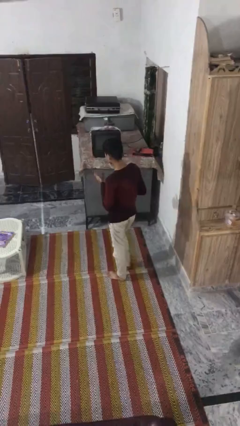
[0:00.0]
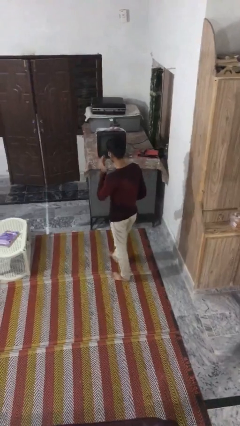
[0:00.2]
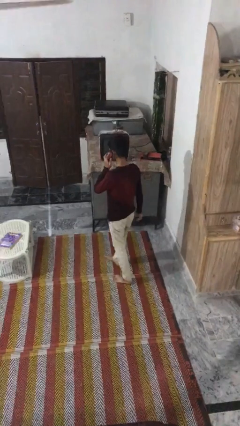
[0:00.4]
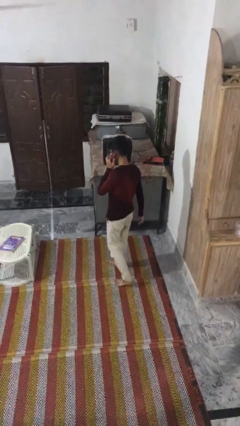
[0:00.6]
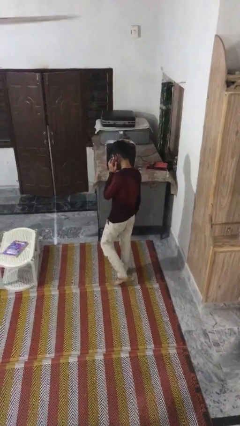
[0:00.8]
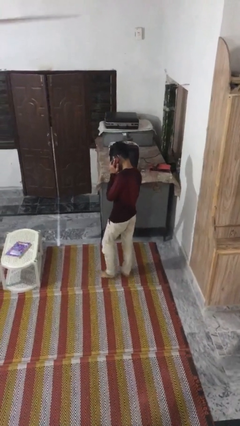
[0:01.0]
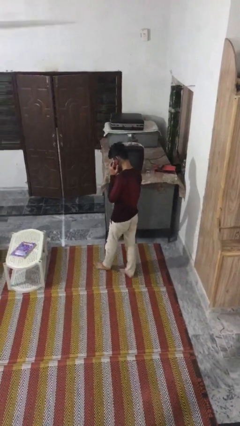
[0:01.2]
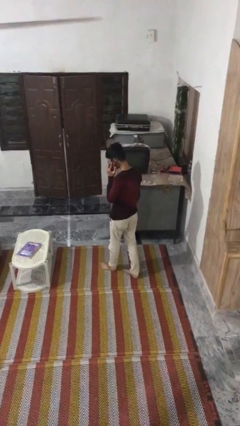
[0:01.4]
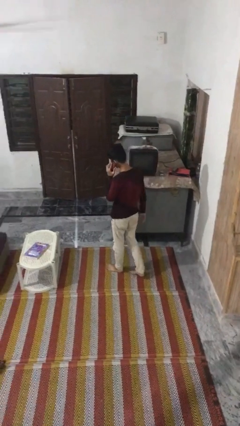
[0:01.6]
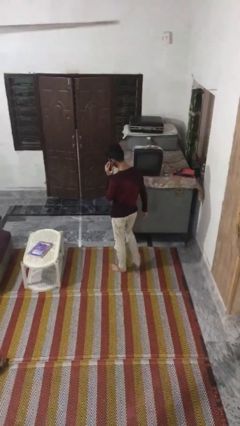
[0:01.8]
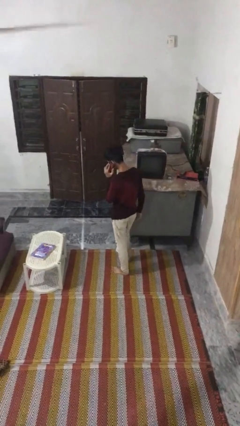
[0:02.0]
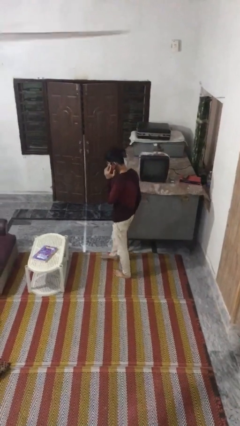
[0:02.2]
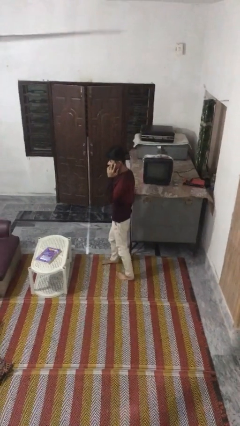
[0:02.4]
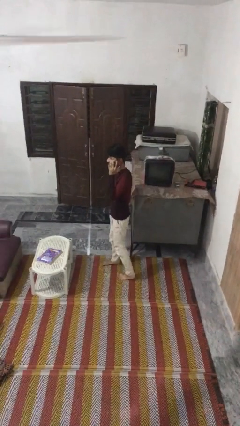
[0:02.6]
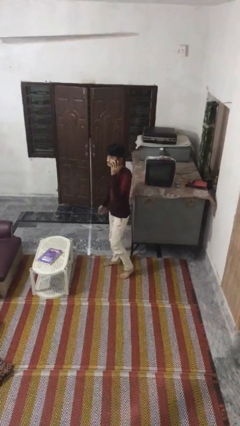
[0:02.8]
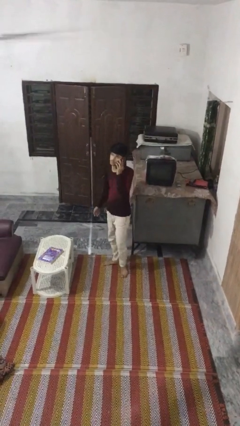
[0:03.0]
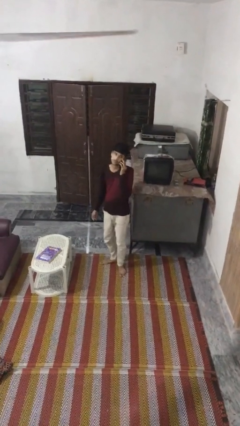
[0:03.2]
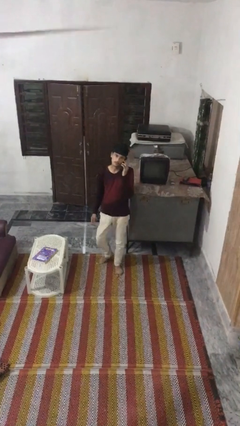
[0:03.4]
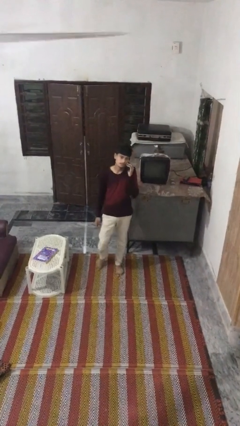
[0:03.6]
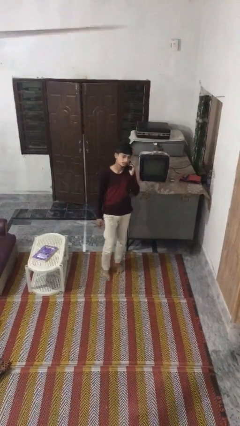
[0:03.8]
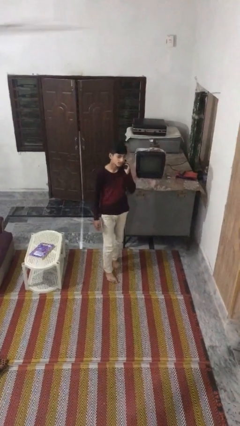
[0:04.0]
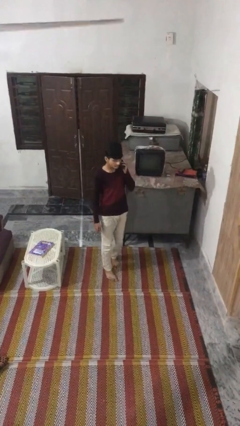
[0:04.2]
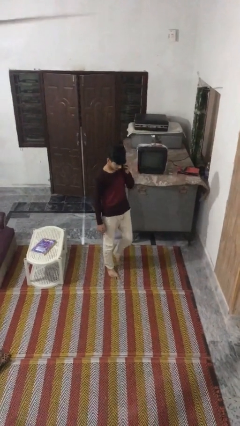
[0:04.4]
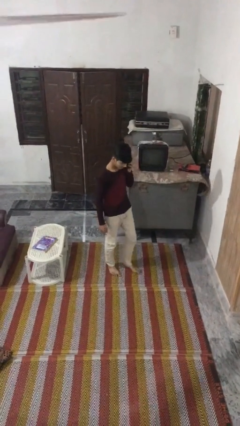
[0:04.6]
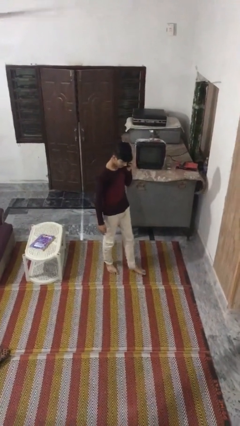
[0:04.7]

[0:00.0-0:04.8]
person talks on phone

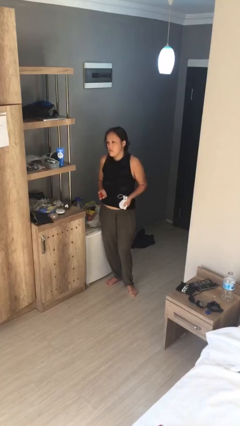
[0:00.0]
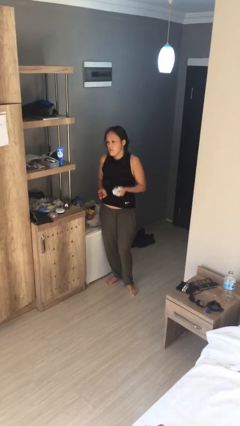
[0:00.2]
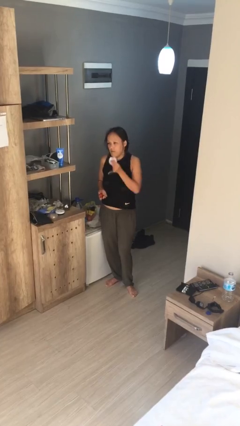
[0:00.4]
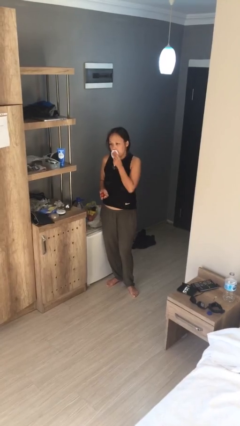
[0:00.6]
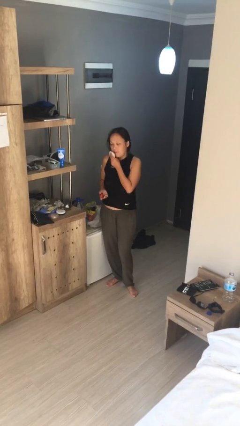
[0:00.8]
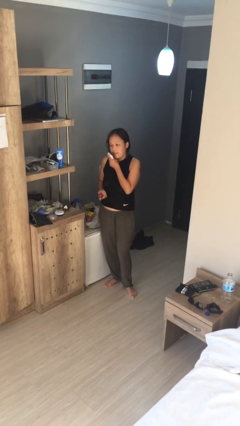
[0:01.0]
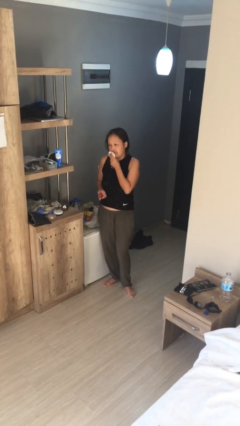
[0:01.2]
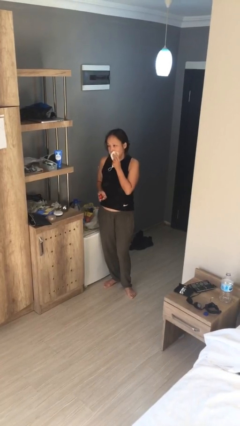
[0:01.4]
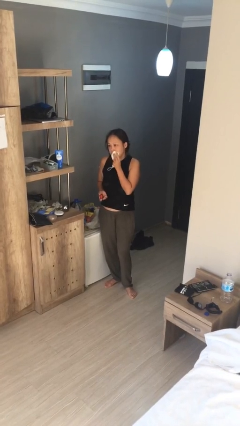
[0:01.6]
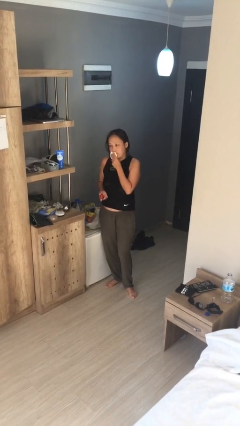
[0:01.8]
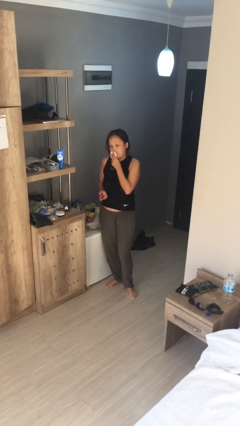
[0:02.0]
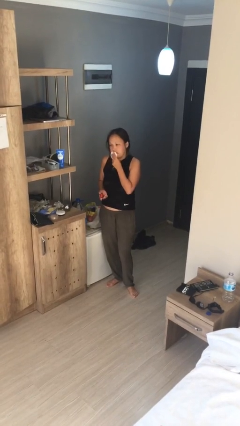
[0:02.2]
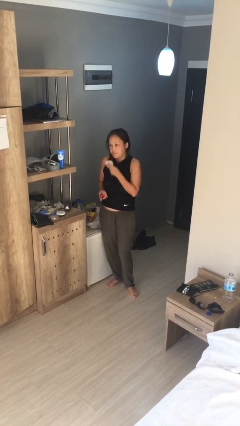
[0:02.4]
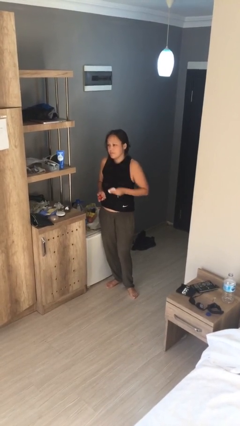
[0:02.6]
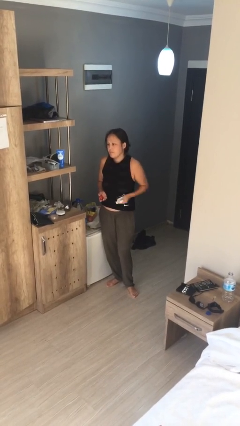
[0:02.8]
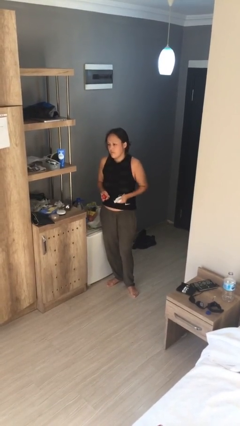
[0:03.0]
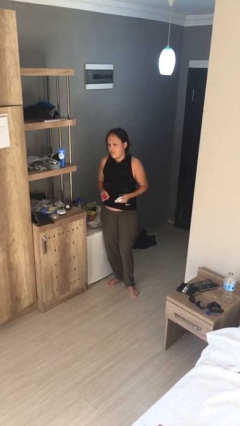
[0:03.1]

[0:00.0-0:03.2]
person wipes mouth with napkin

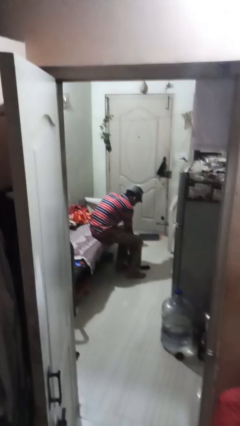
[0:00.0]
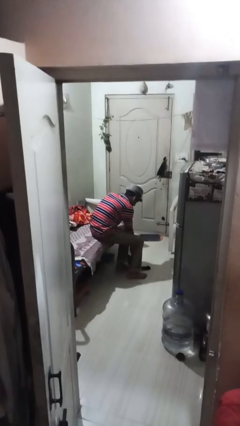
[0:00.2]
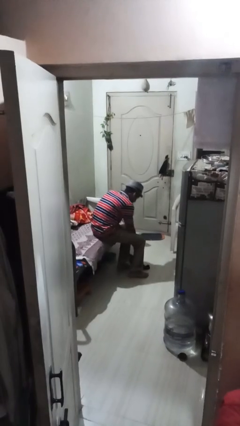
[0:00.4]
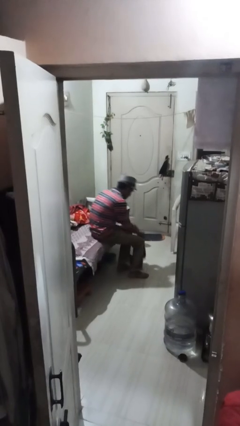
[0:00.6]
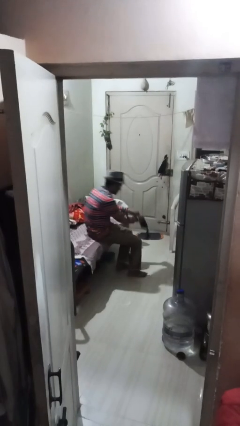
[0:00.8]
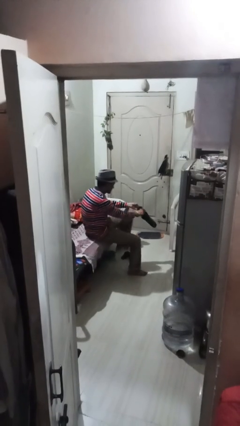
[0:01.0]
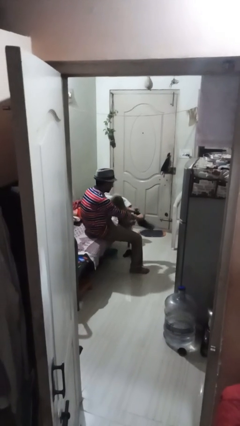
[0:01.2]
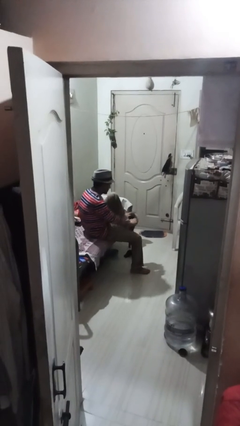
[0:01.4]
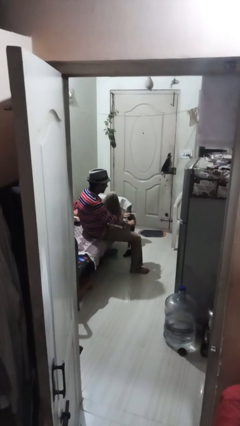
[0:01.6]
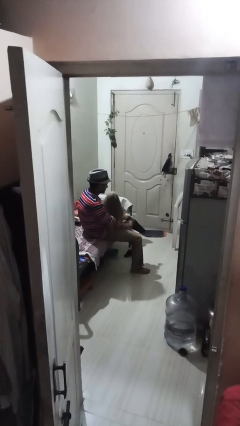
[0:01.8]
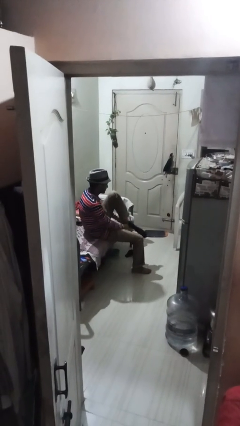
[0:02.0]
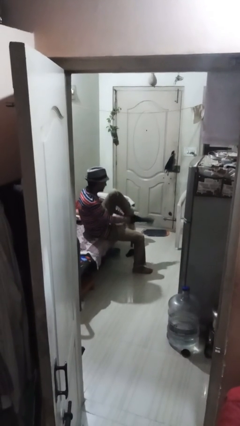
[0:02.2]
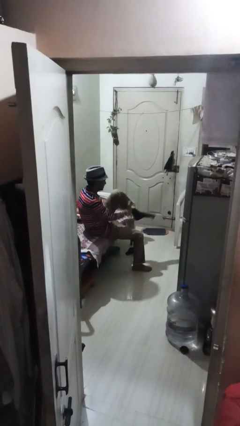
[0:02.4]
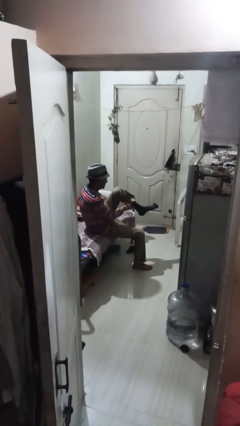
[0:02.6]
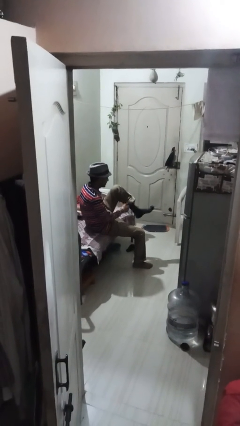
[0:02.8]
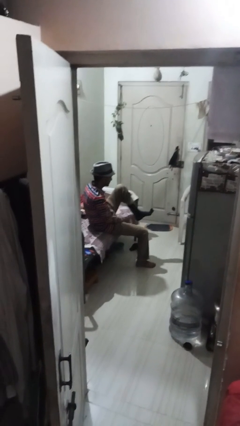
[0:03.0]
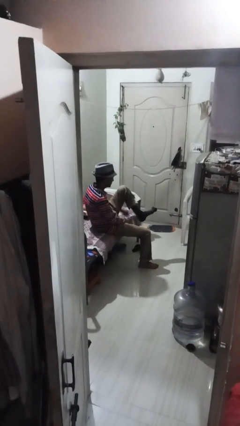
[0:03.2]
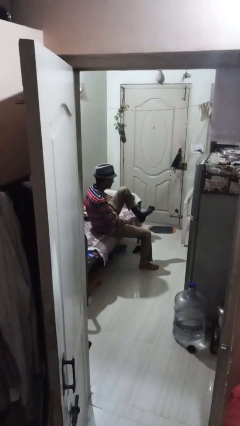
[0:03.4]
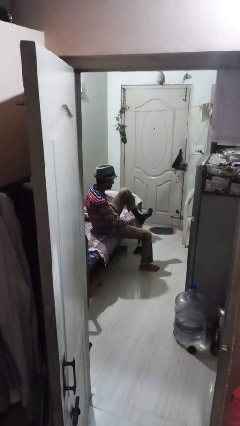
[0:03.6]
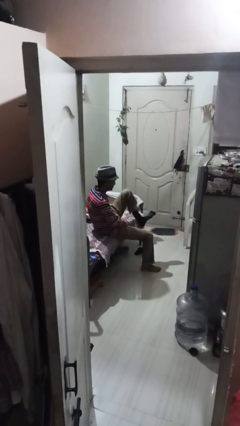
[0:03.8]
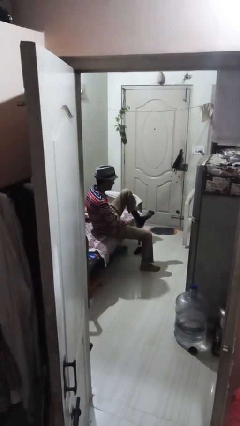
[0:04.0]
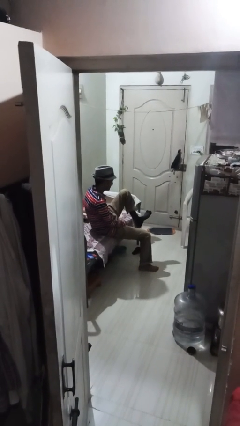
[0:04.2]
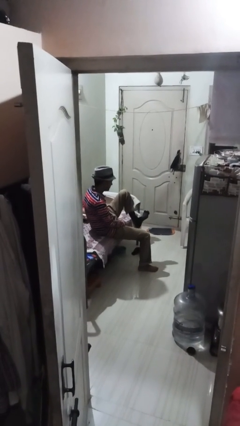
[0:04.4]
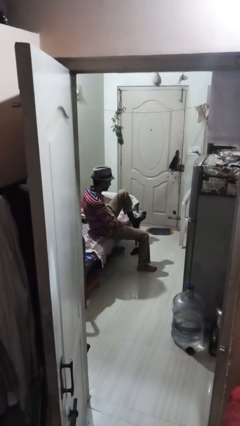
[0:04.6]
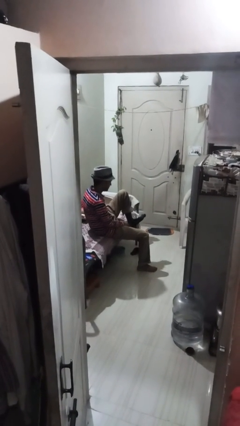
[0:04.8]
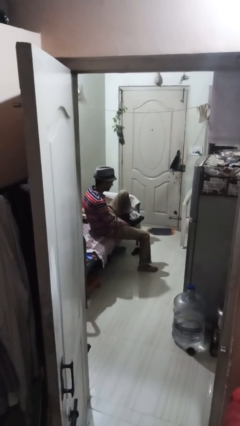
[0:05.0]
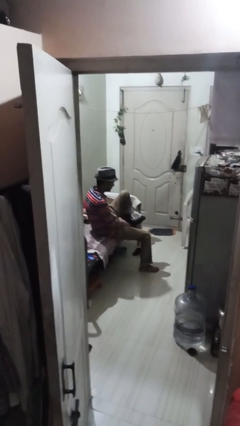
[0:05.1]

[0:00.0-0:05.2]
person puts on socks

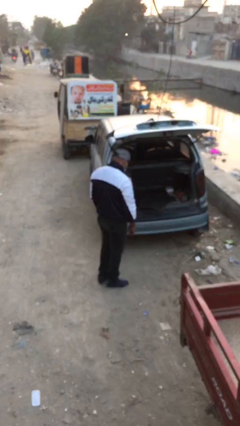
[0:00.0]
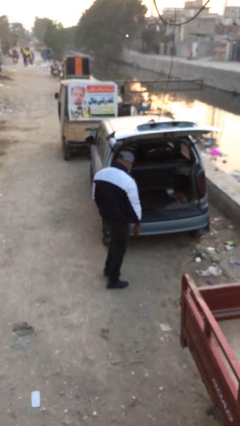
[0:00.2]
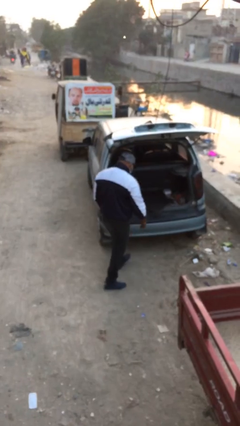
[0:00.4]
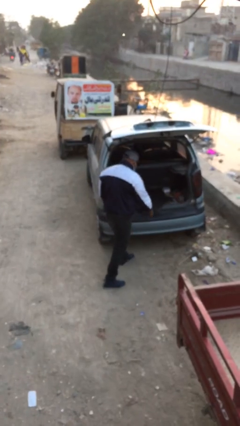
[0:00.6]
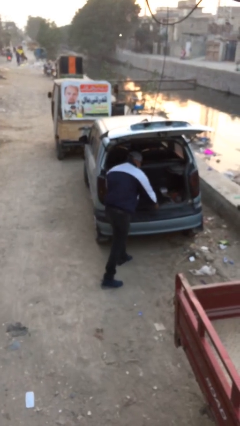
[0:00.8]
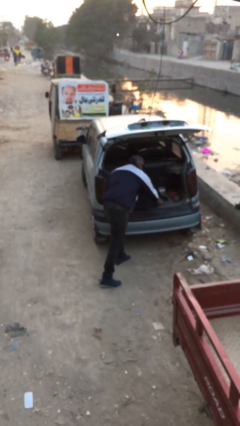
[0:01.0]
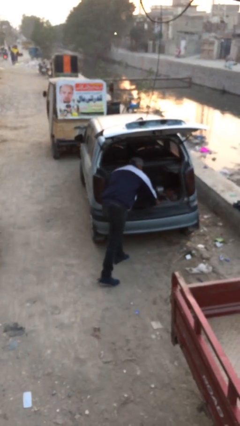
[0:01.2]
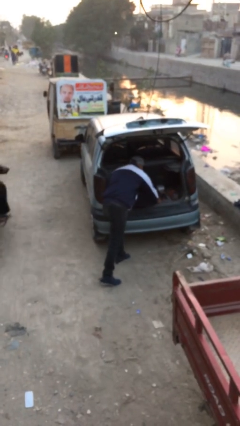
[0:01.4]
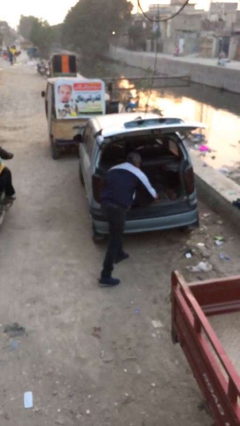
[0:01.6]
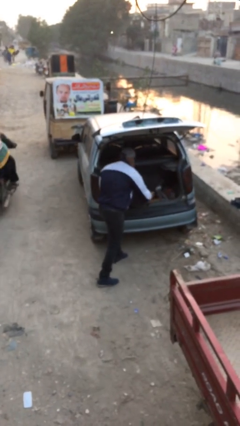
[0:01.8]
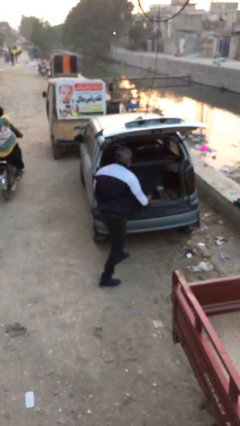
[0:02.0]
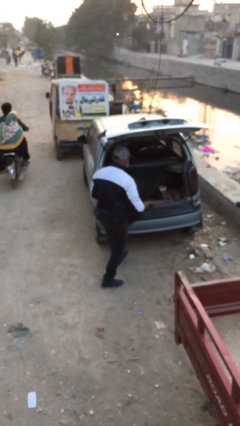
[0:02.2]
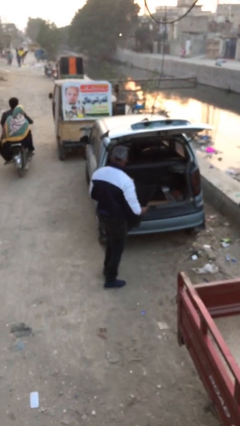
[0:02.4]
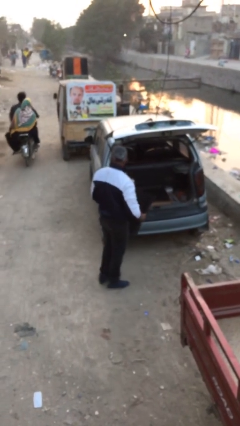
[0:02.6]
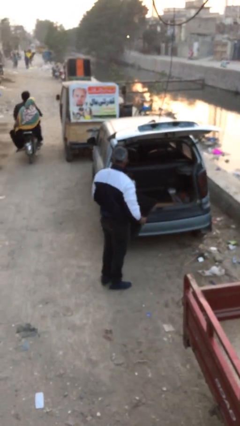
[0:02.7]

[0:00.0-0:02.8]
person unloads car

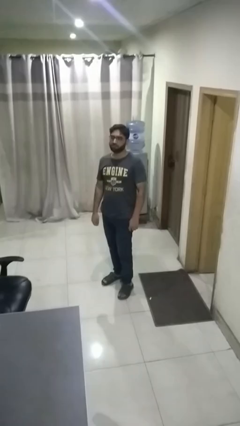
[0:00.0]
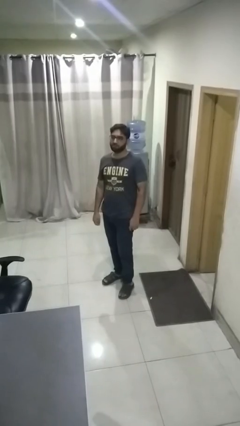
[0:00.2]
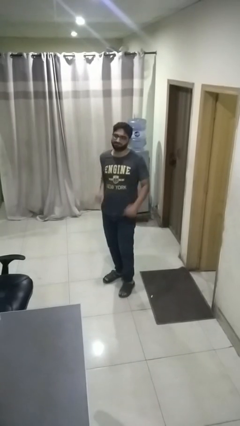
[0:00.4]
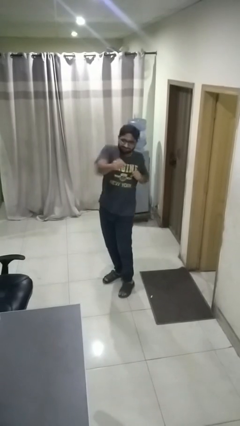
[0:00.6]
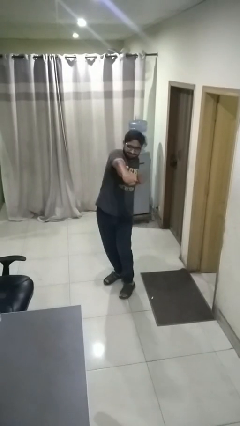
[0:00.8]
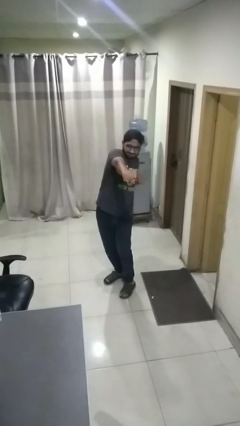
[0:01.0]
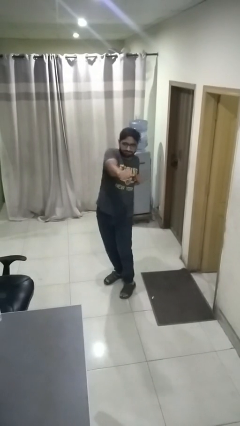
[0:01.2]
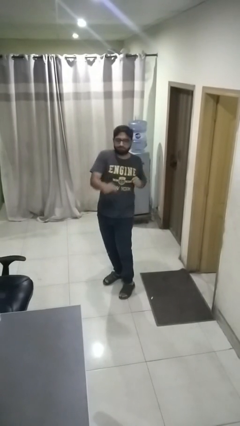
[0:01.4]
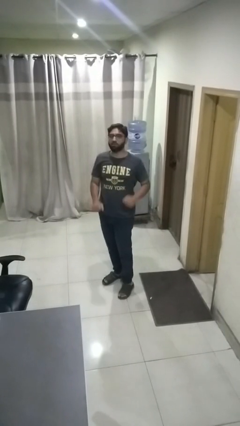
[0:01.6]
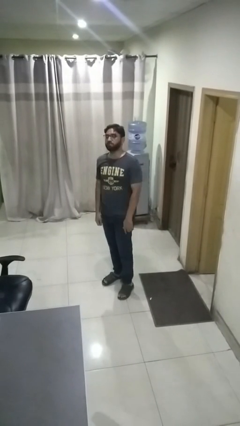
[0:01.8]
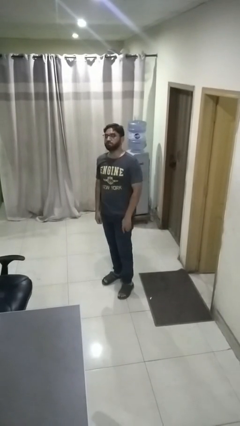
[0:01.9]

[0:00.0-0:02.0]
person punches
